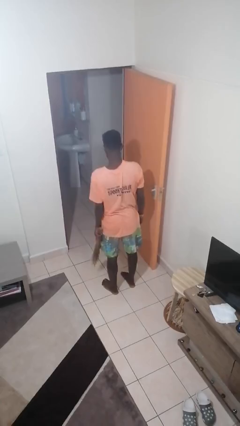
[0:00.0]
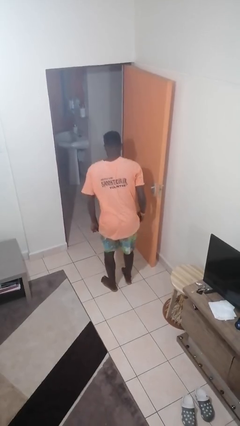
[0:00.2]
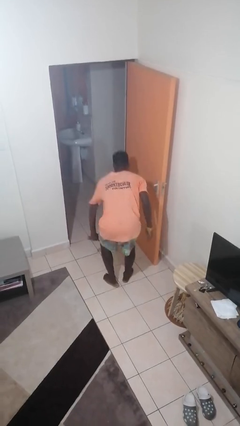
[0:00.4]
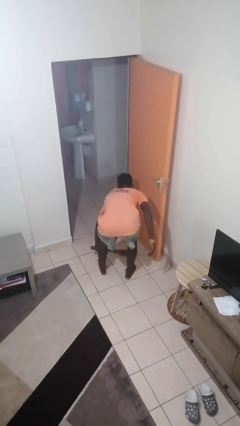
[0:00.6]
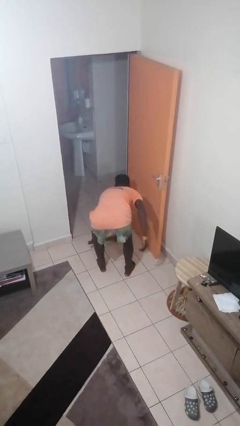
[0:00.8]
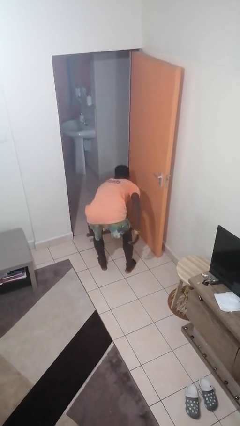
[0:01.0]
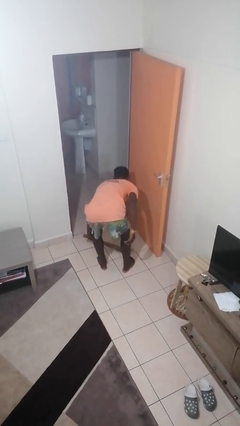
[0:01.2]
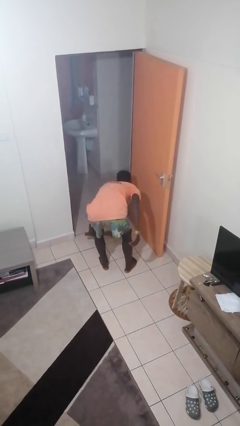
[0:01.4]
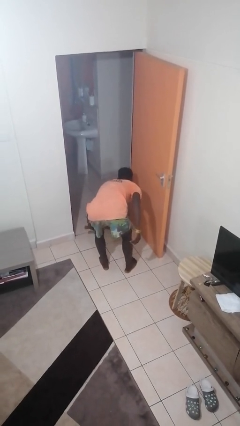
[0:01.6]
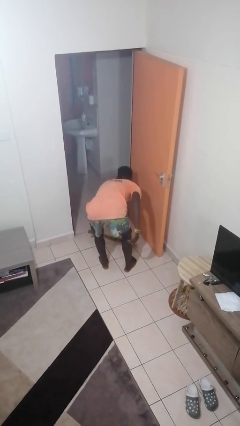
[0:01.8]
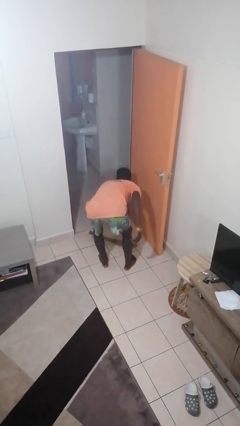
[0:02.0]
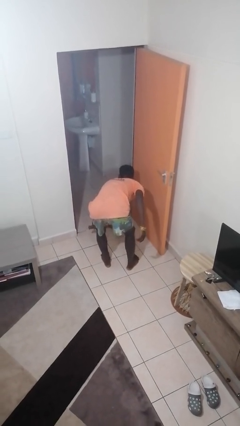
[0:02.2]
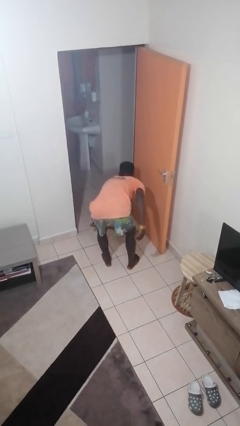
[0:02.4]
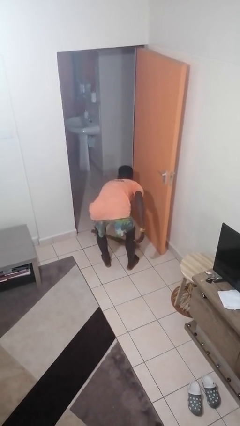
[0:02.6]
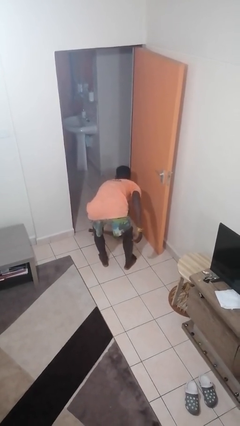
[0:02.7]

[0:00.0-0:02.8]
person sweeps floor

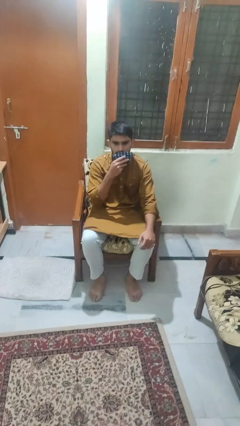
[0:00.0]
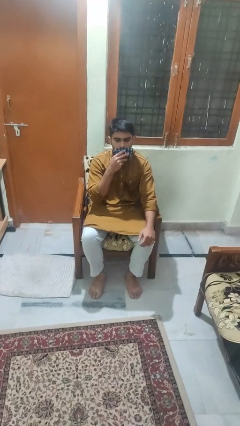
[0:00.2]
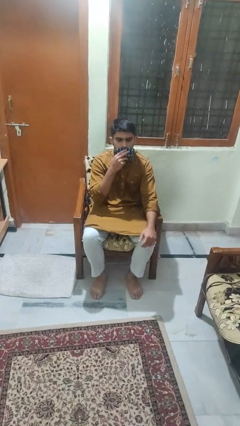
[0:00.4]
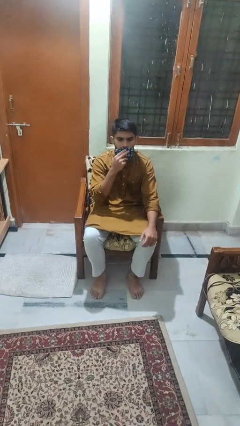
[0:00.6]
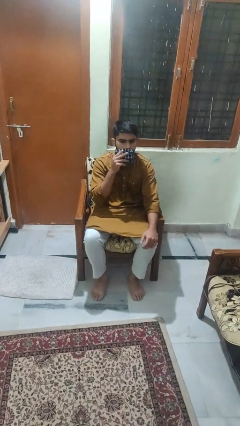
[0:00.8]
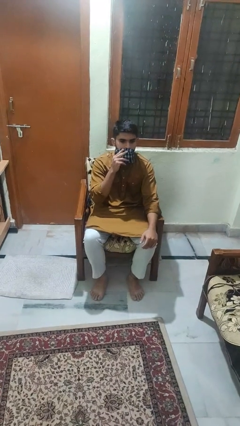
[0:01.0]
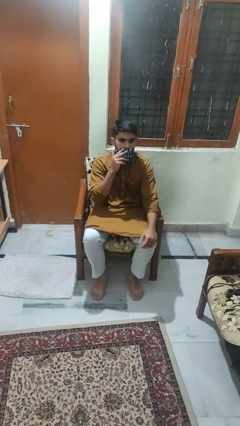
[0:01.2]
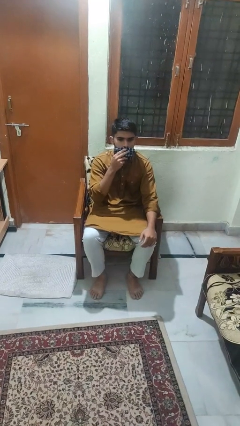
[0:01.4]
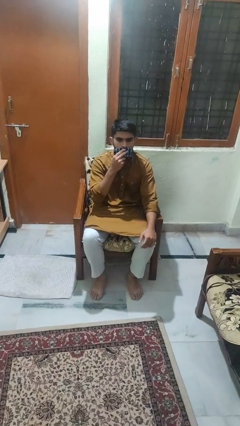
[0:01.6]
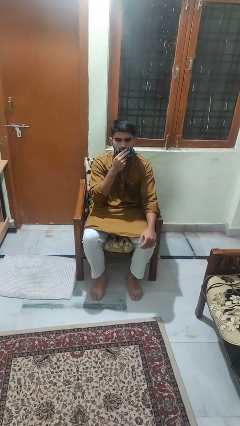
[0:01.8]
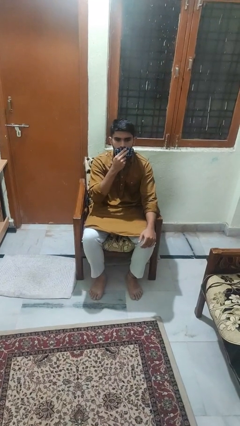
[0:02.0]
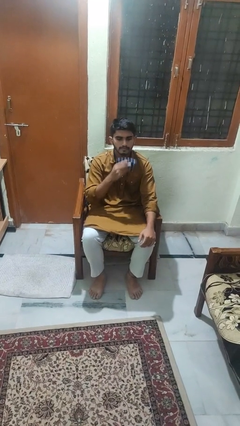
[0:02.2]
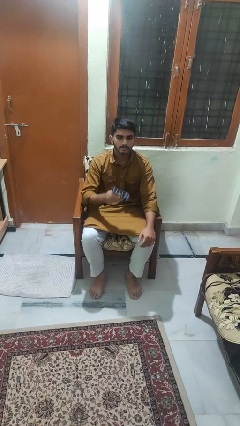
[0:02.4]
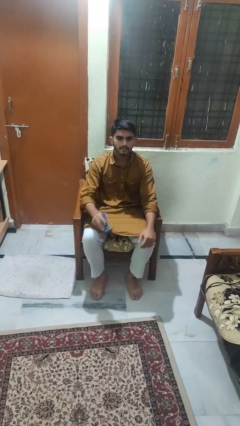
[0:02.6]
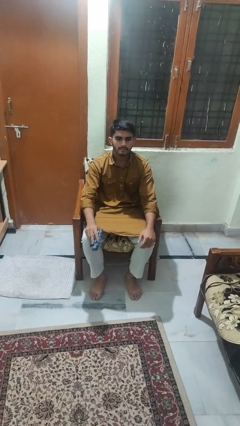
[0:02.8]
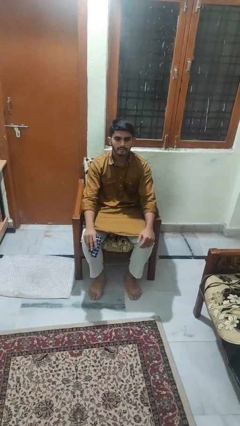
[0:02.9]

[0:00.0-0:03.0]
person wipes mouth with napkin

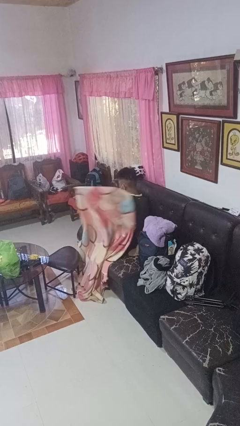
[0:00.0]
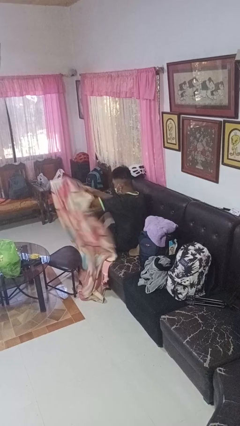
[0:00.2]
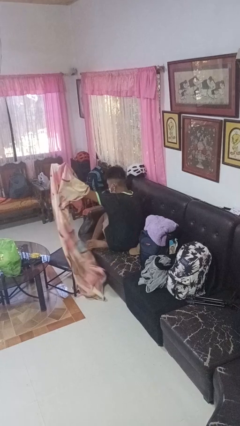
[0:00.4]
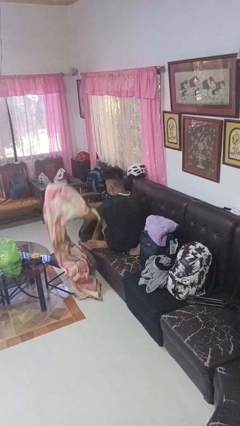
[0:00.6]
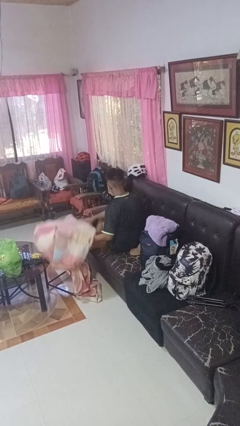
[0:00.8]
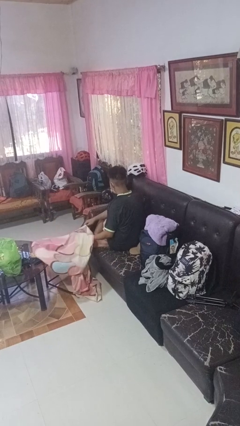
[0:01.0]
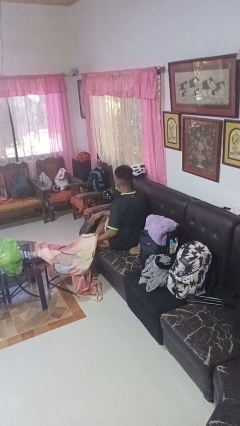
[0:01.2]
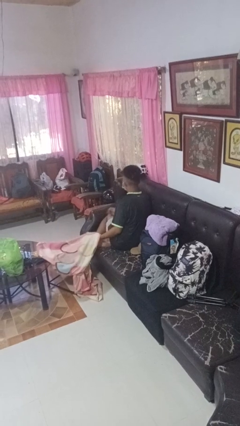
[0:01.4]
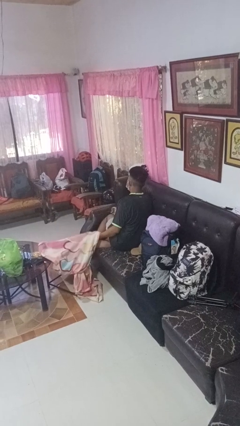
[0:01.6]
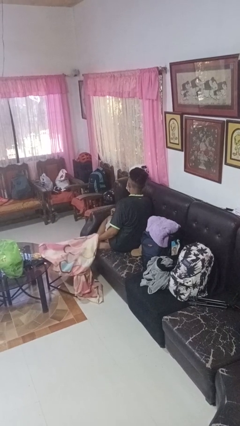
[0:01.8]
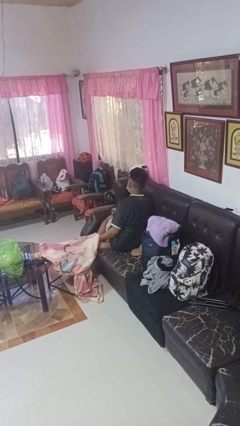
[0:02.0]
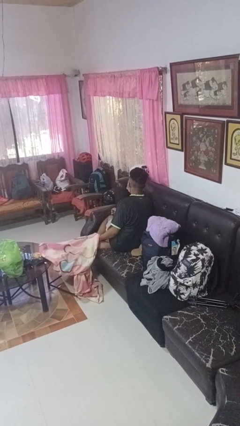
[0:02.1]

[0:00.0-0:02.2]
person uncovers with blanket

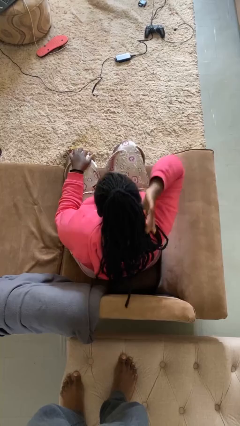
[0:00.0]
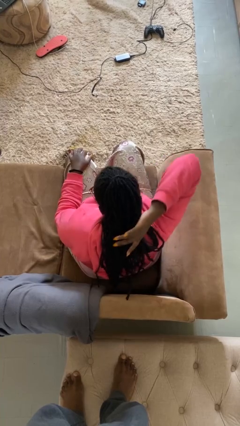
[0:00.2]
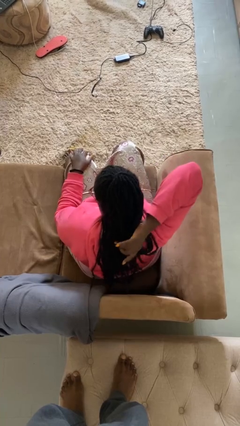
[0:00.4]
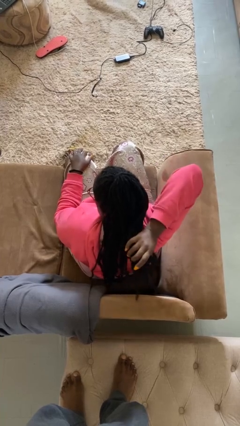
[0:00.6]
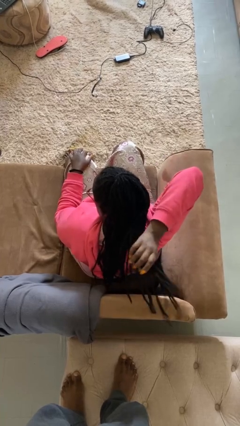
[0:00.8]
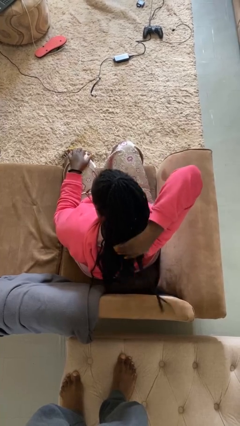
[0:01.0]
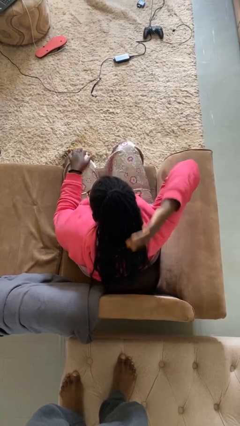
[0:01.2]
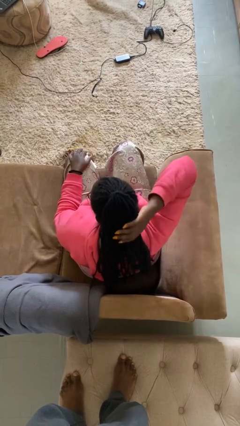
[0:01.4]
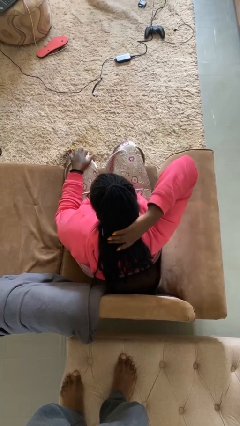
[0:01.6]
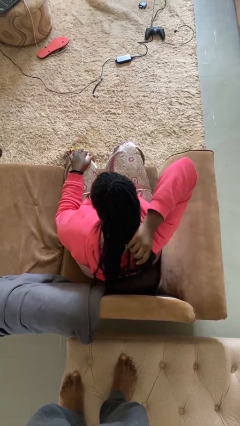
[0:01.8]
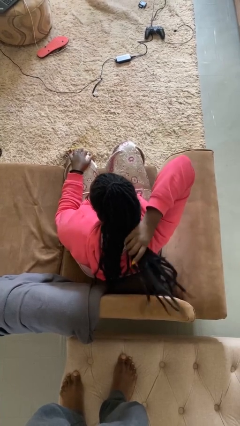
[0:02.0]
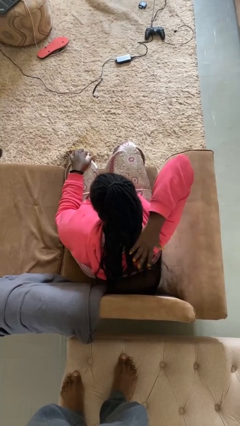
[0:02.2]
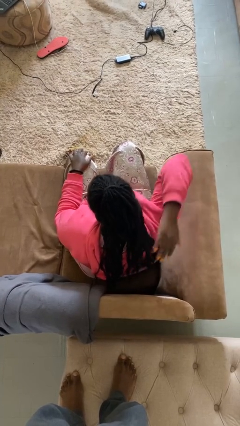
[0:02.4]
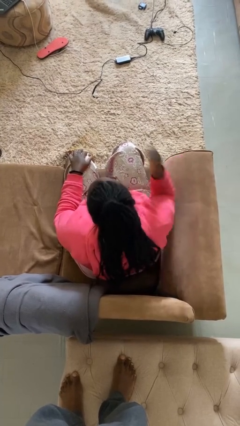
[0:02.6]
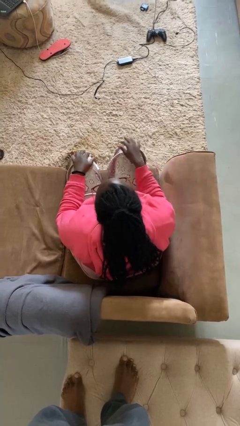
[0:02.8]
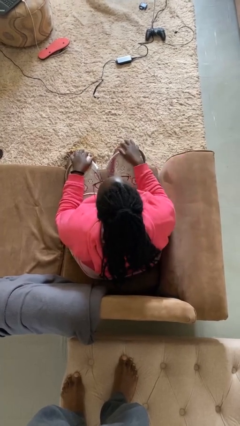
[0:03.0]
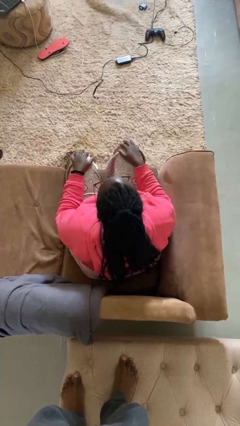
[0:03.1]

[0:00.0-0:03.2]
person strokes hair

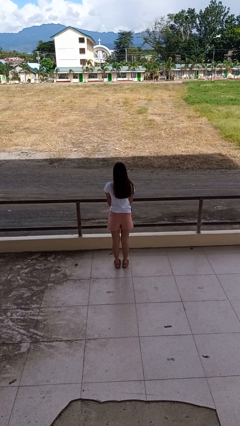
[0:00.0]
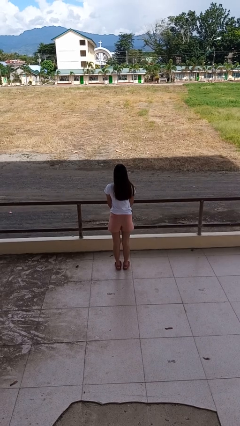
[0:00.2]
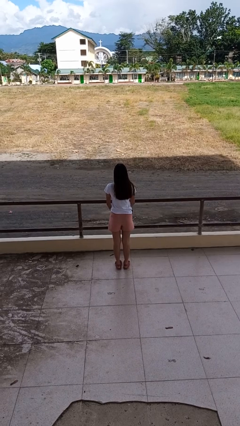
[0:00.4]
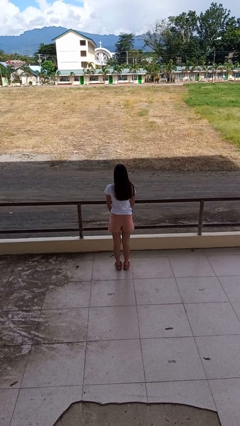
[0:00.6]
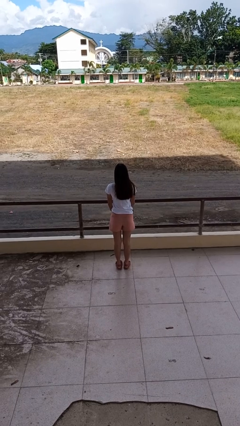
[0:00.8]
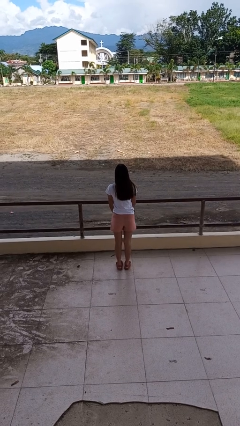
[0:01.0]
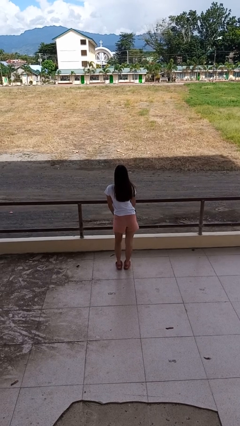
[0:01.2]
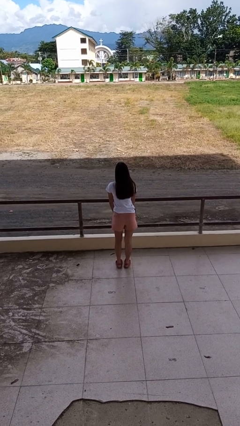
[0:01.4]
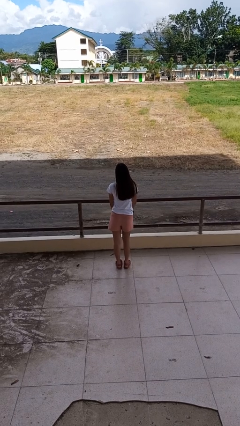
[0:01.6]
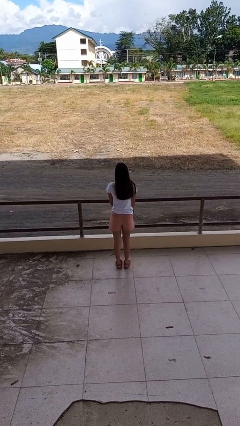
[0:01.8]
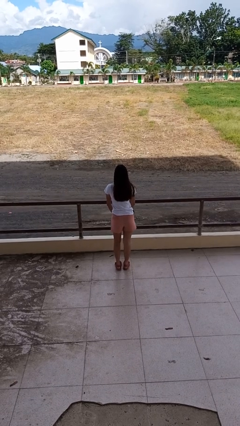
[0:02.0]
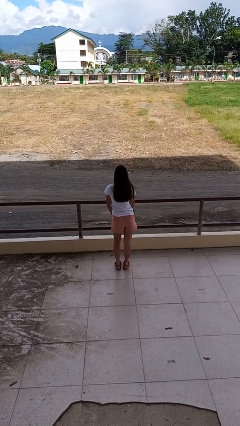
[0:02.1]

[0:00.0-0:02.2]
person wiggles hips

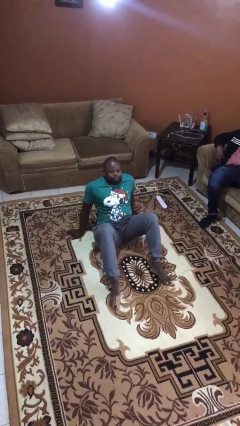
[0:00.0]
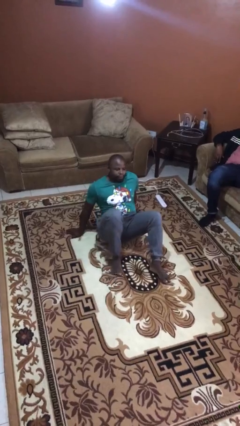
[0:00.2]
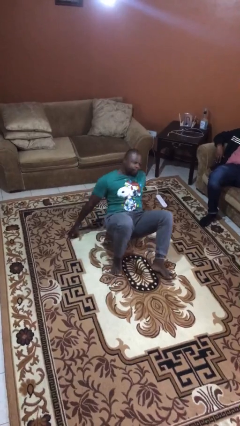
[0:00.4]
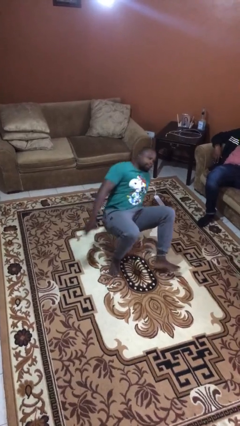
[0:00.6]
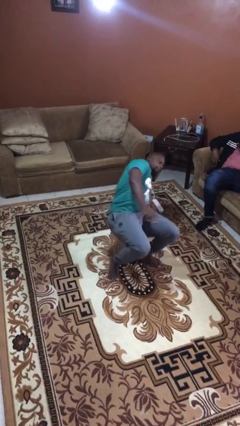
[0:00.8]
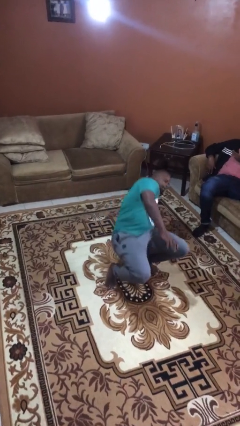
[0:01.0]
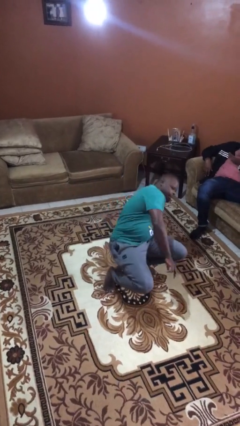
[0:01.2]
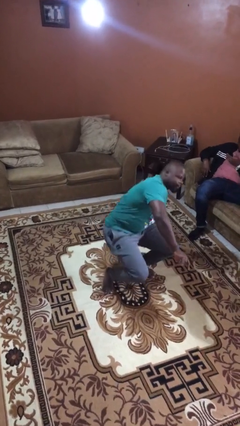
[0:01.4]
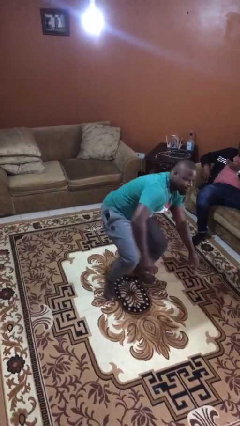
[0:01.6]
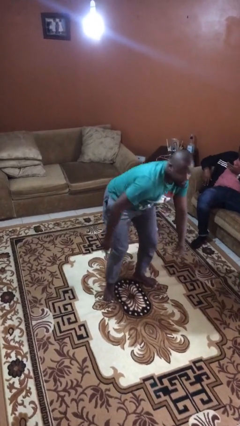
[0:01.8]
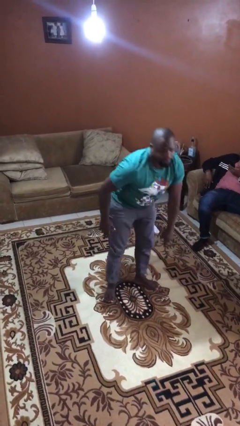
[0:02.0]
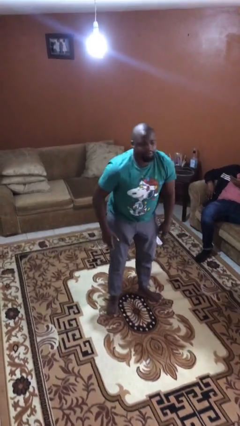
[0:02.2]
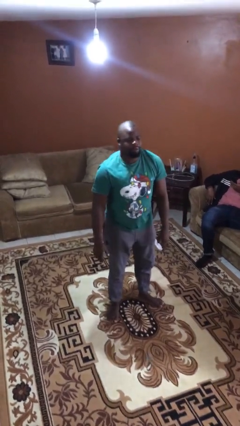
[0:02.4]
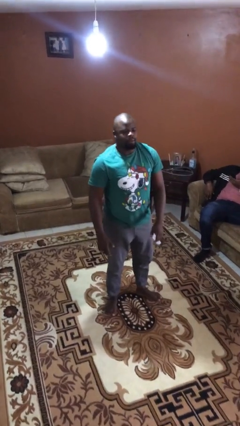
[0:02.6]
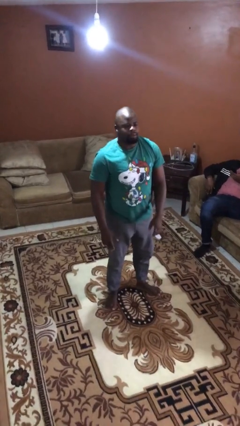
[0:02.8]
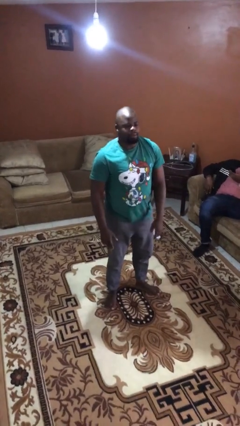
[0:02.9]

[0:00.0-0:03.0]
person stands up

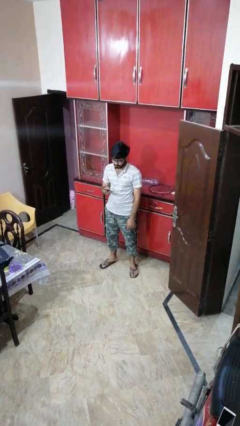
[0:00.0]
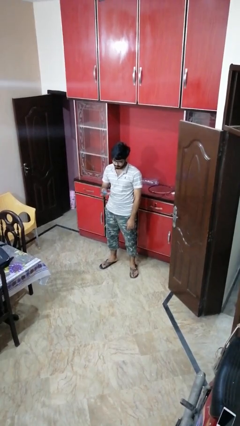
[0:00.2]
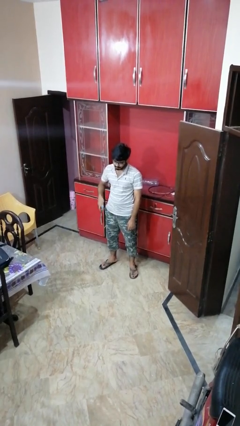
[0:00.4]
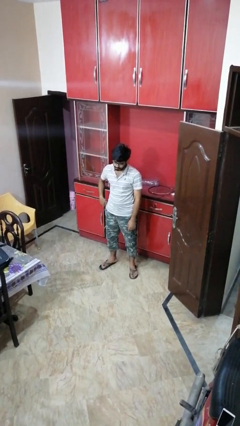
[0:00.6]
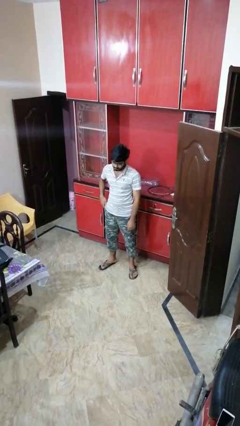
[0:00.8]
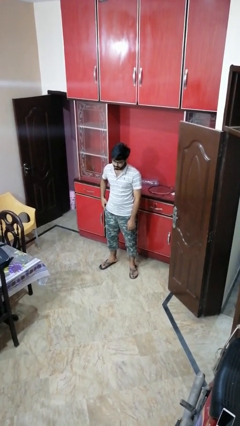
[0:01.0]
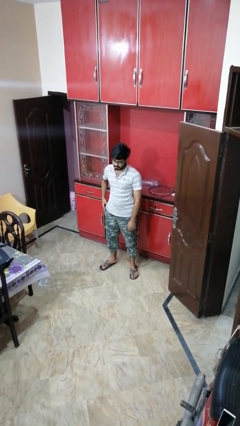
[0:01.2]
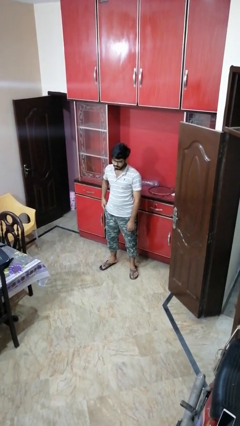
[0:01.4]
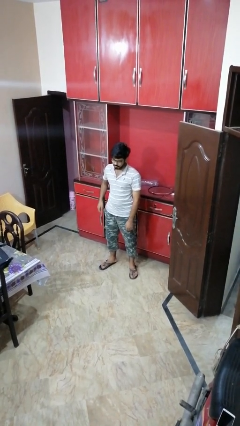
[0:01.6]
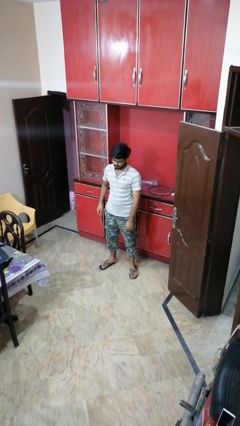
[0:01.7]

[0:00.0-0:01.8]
person puts phone into pocket
